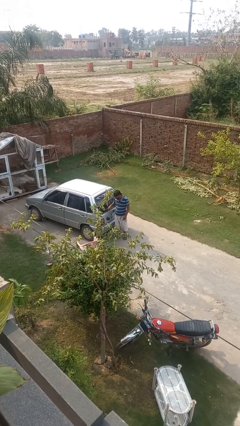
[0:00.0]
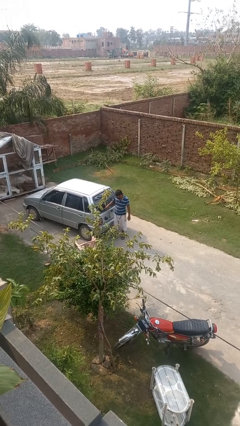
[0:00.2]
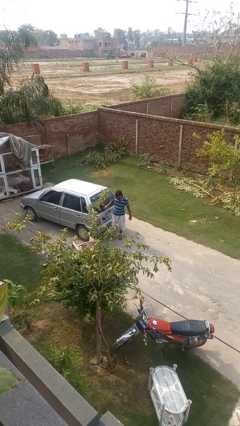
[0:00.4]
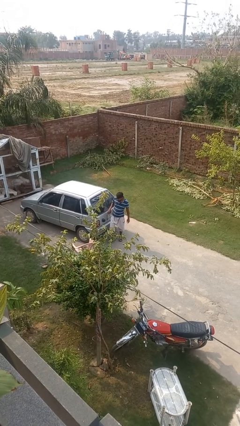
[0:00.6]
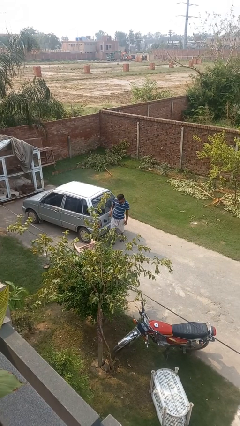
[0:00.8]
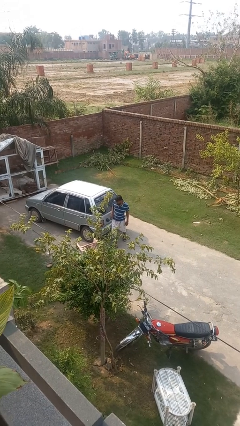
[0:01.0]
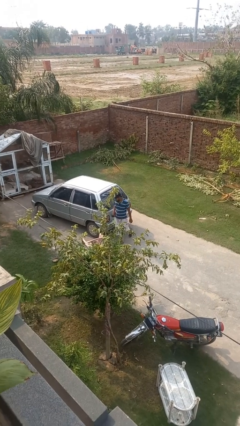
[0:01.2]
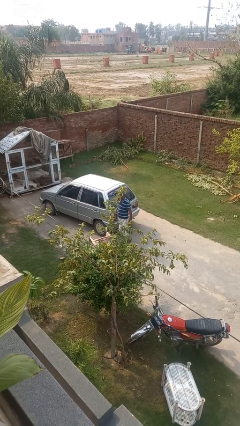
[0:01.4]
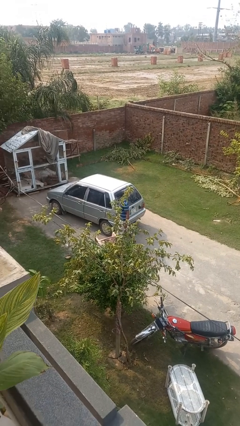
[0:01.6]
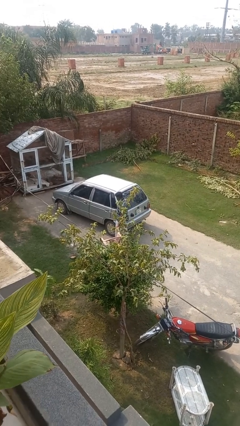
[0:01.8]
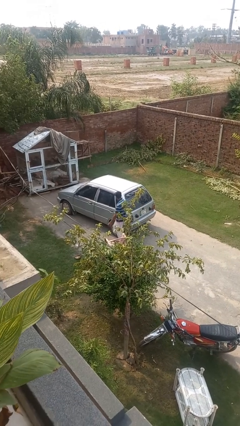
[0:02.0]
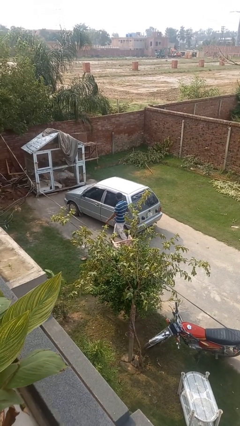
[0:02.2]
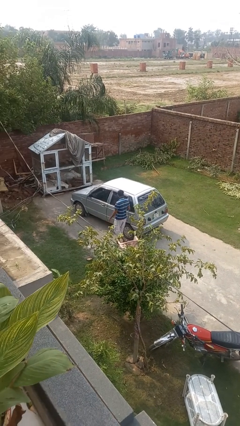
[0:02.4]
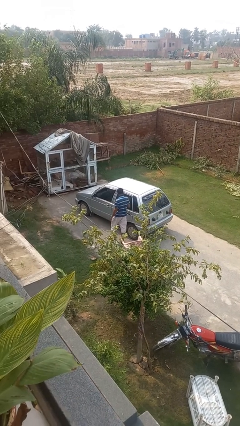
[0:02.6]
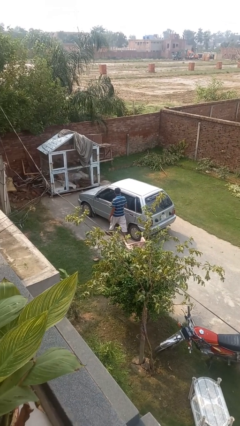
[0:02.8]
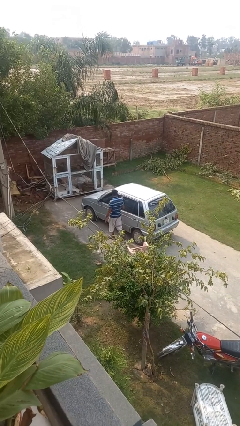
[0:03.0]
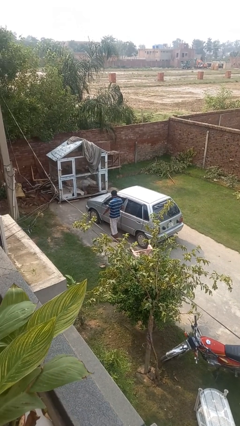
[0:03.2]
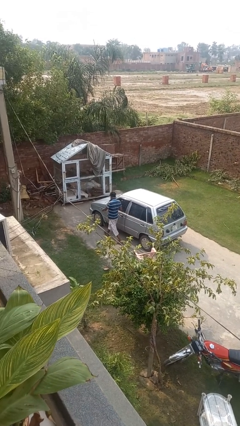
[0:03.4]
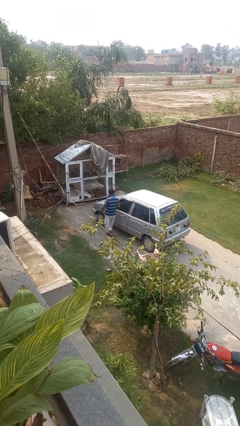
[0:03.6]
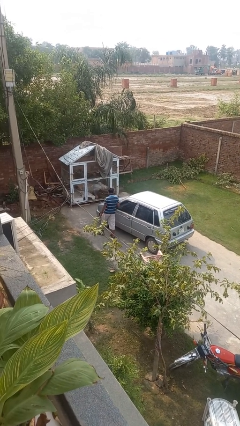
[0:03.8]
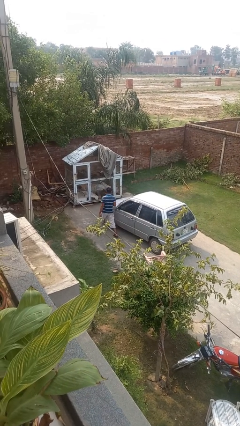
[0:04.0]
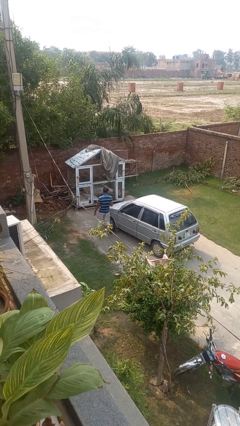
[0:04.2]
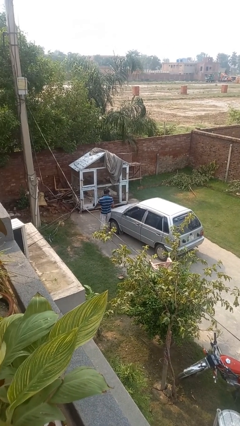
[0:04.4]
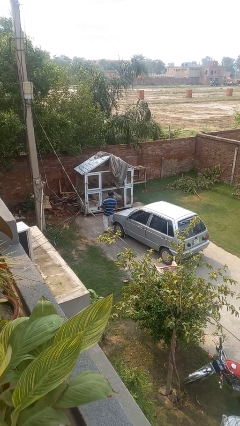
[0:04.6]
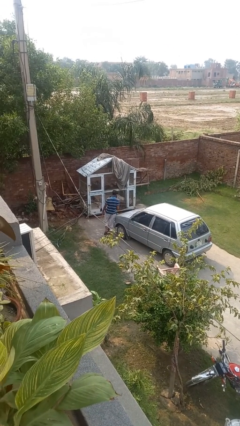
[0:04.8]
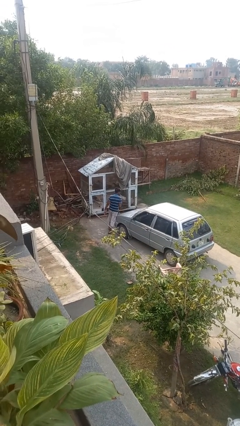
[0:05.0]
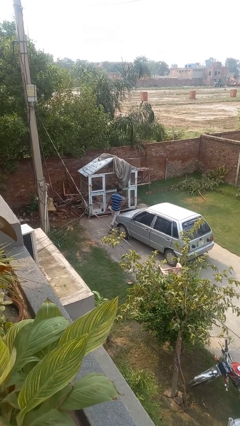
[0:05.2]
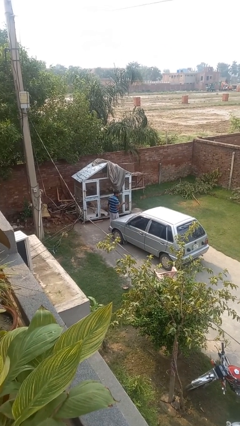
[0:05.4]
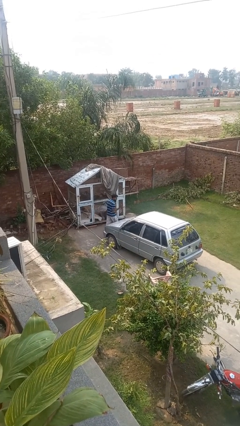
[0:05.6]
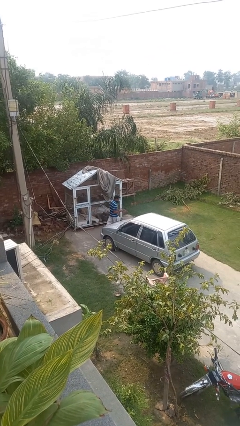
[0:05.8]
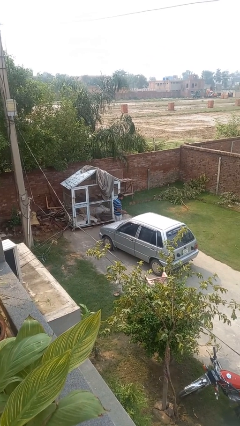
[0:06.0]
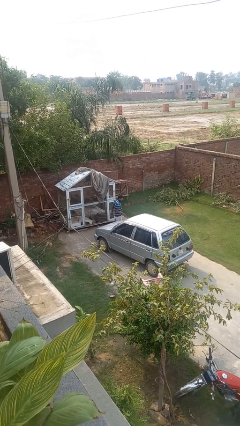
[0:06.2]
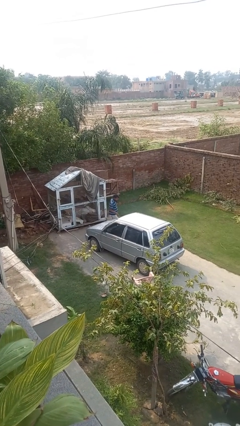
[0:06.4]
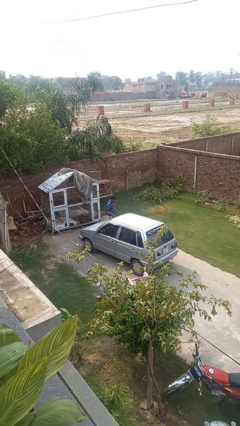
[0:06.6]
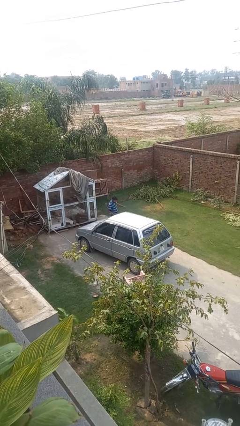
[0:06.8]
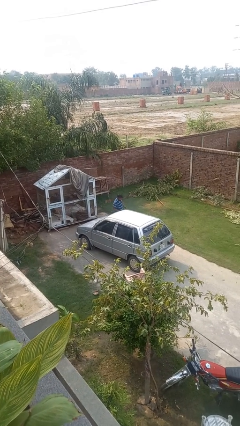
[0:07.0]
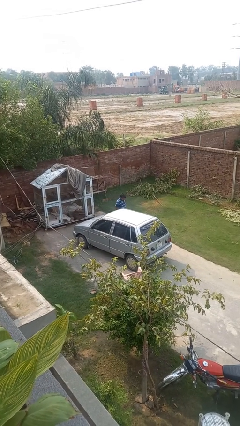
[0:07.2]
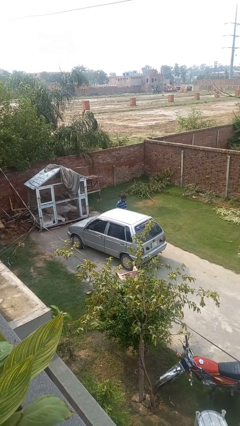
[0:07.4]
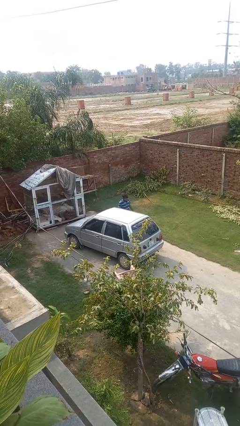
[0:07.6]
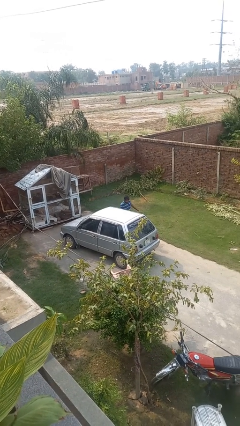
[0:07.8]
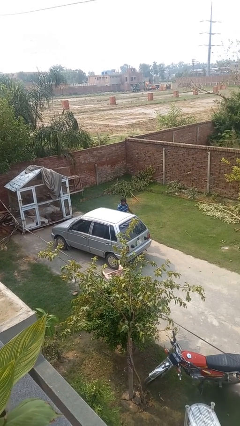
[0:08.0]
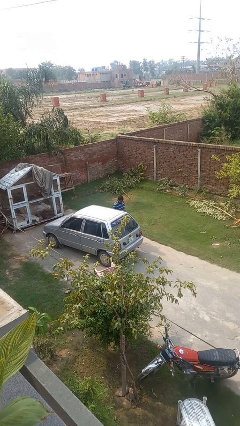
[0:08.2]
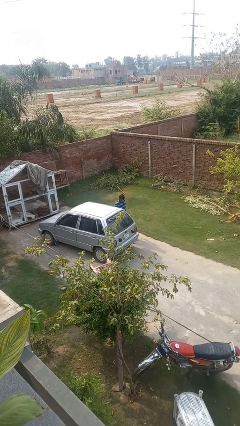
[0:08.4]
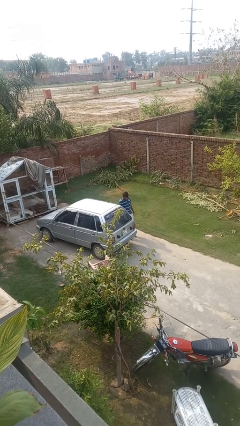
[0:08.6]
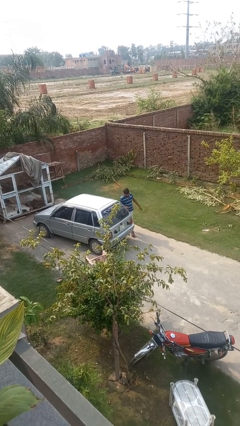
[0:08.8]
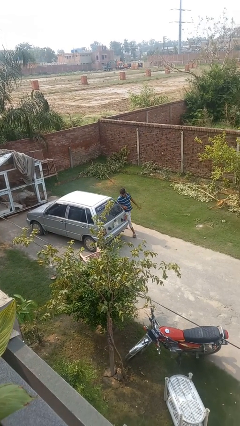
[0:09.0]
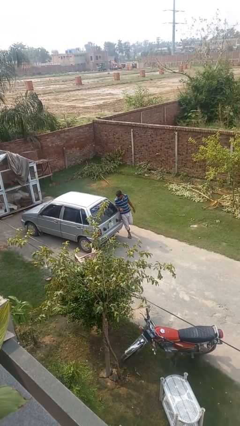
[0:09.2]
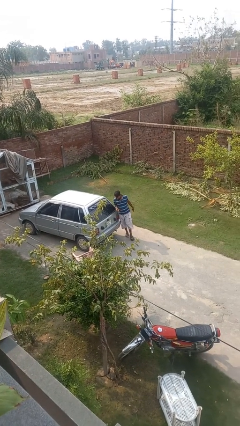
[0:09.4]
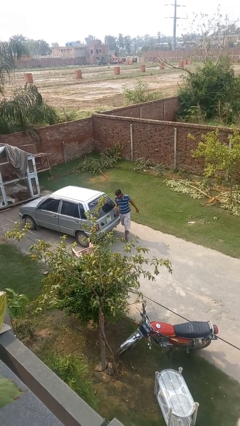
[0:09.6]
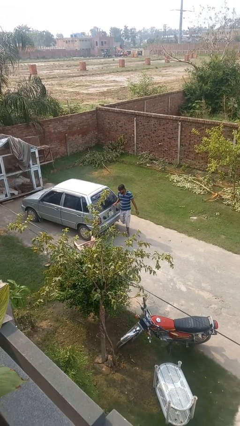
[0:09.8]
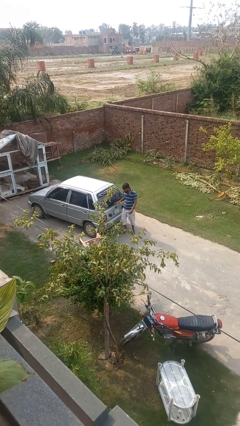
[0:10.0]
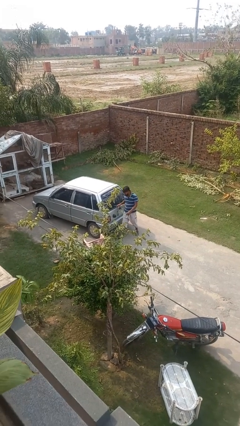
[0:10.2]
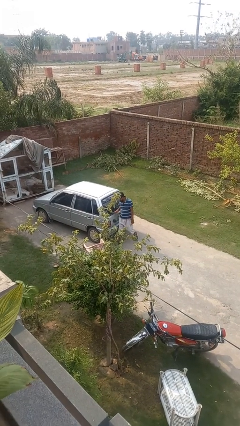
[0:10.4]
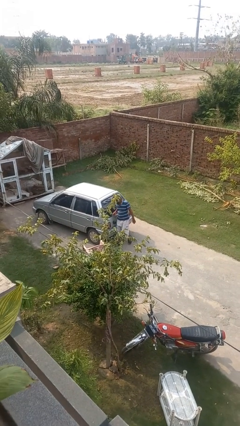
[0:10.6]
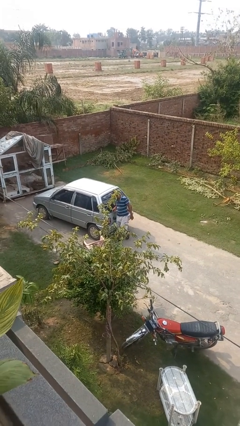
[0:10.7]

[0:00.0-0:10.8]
person walks around car

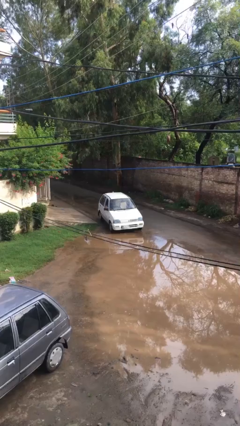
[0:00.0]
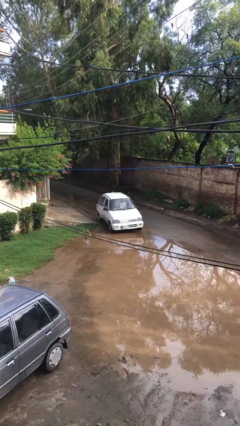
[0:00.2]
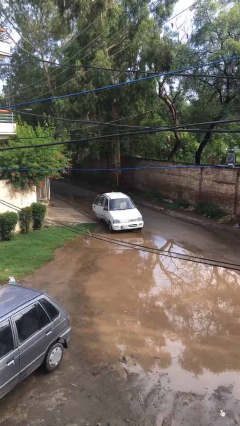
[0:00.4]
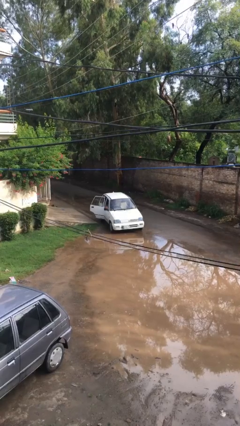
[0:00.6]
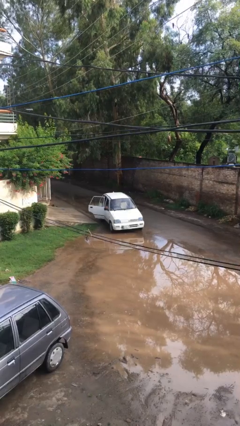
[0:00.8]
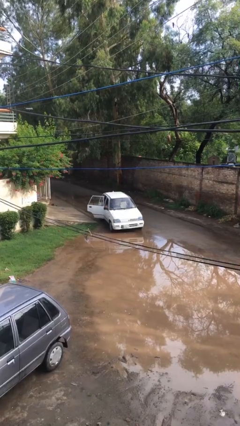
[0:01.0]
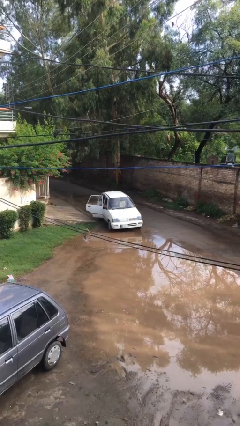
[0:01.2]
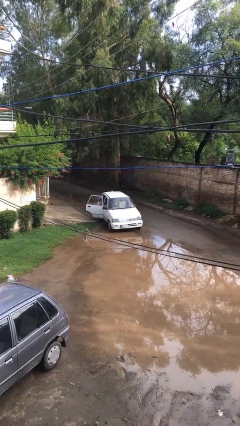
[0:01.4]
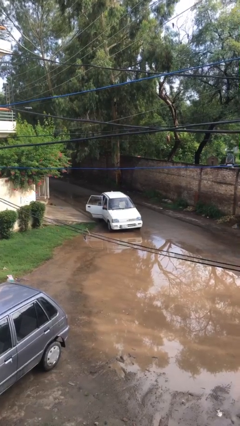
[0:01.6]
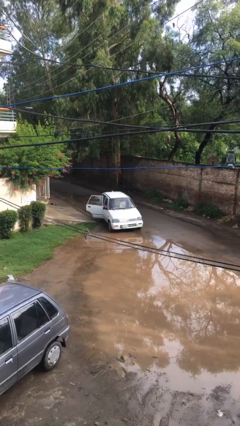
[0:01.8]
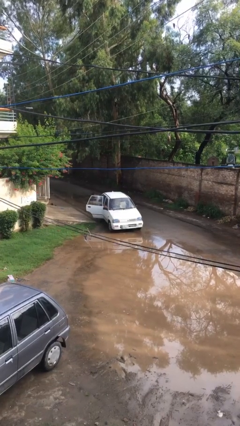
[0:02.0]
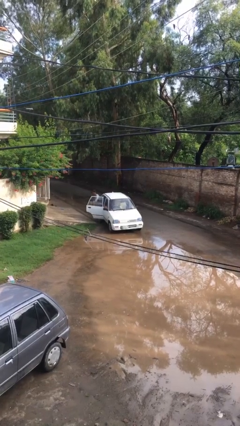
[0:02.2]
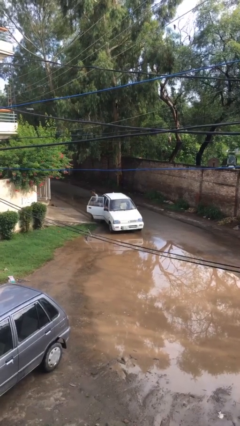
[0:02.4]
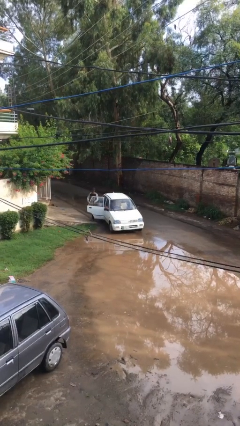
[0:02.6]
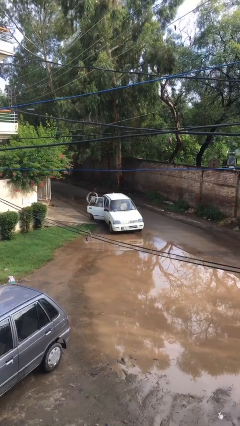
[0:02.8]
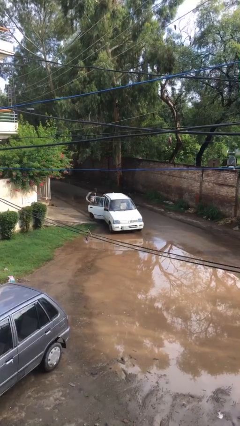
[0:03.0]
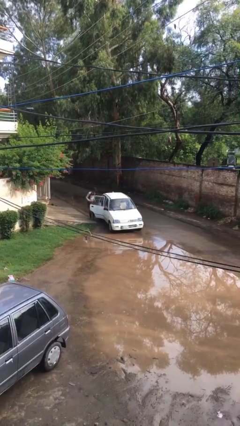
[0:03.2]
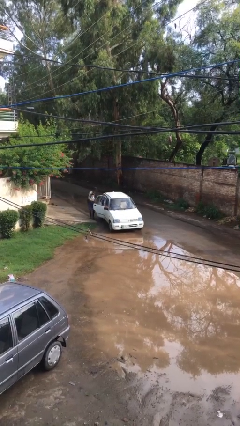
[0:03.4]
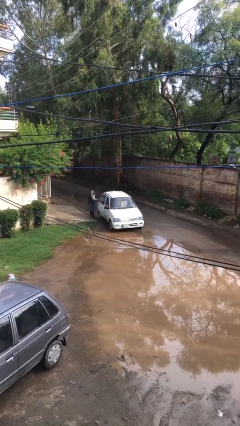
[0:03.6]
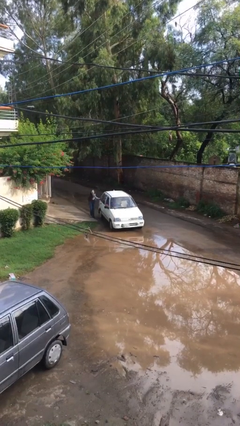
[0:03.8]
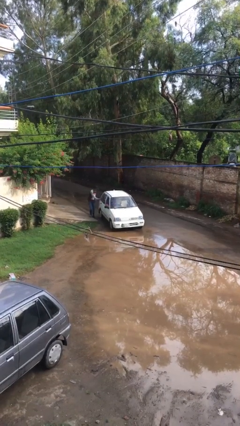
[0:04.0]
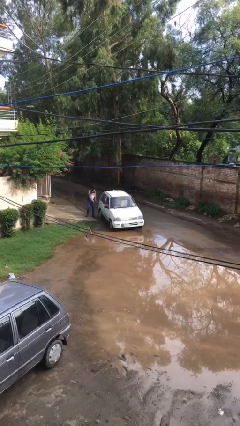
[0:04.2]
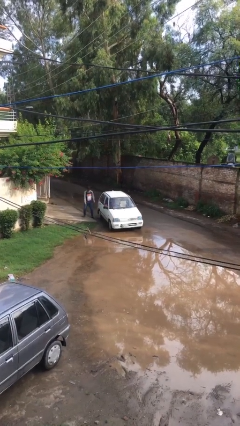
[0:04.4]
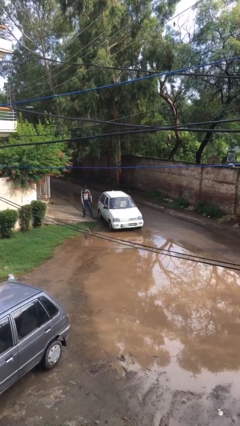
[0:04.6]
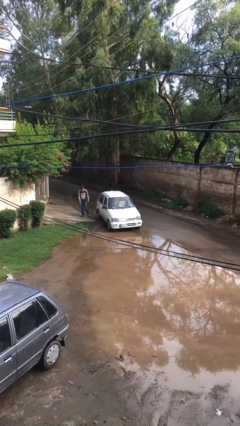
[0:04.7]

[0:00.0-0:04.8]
car drops off person

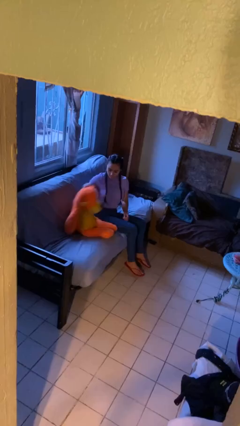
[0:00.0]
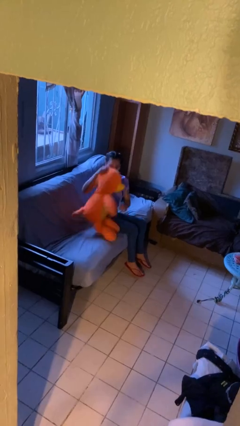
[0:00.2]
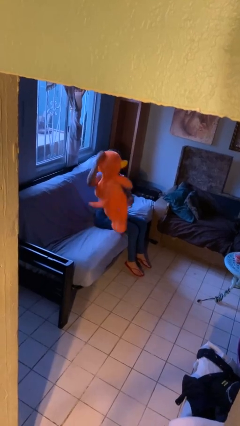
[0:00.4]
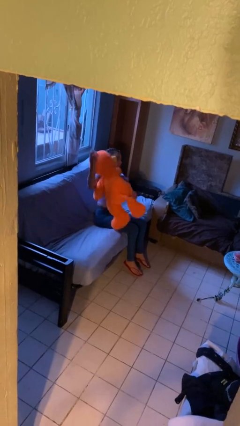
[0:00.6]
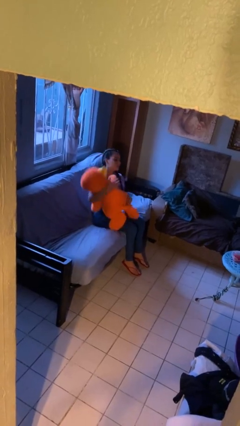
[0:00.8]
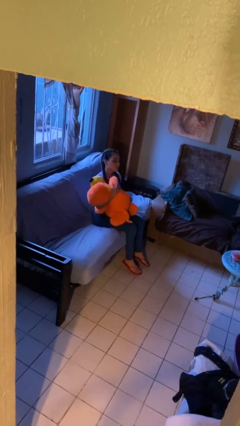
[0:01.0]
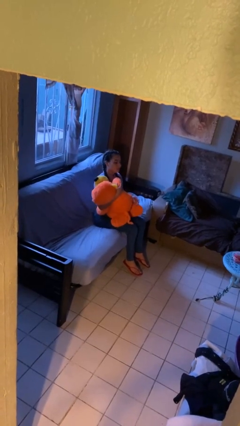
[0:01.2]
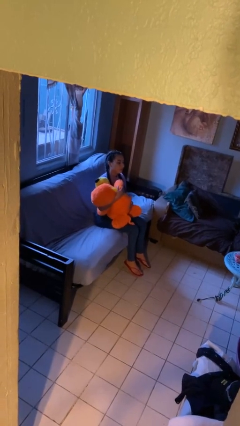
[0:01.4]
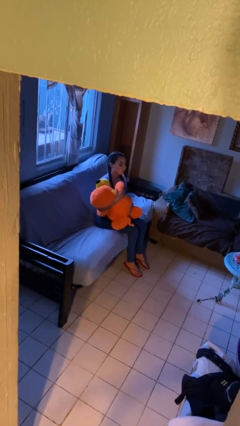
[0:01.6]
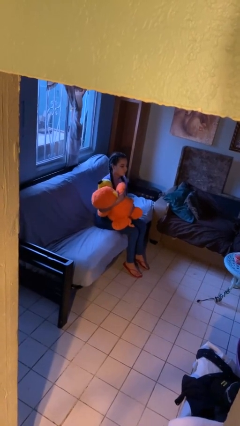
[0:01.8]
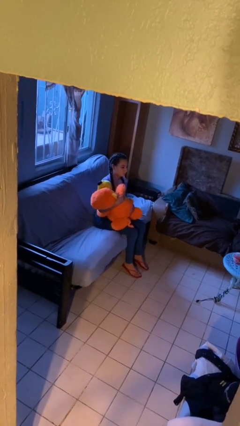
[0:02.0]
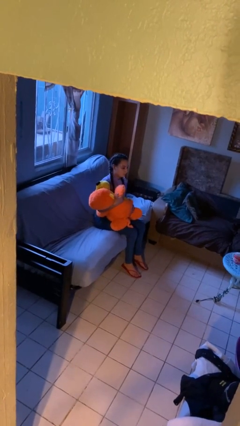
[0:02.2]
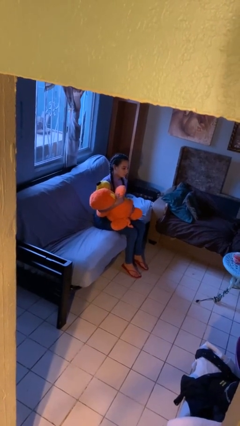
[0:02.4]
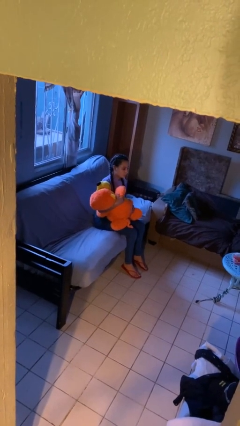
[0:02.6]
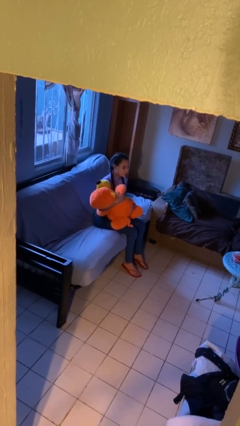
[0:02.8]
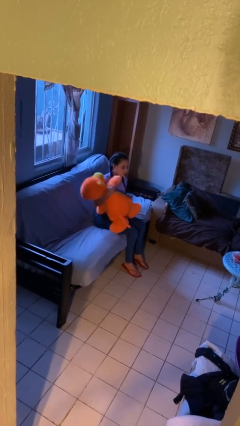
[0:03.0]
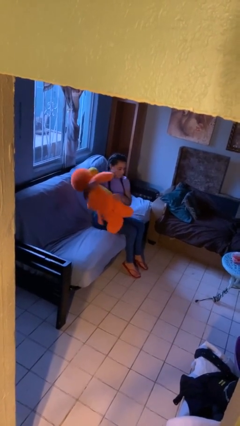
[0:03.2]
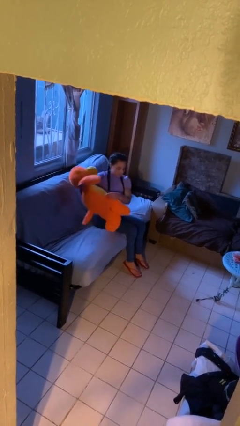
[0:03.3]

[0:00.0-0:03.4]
person hugs stuffed animal
